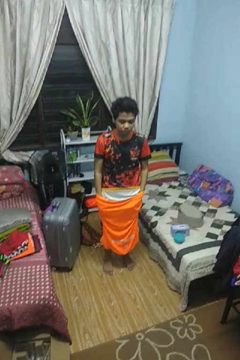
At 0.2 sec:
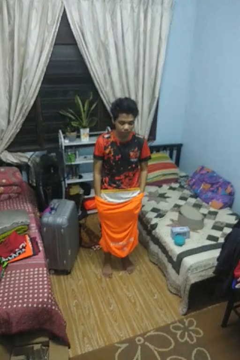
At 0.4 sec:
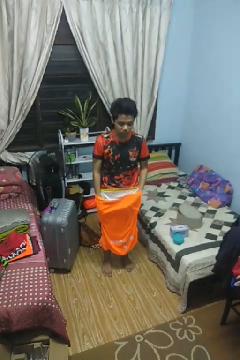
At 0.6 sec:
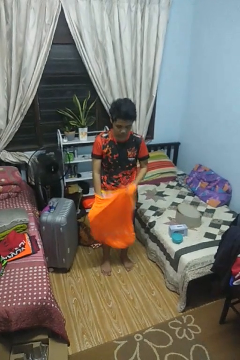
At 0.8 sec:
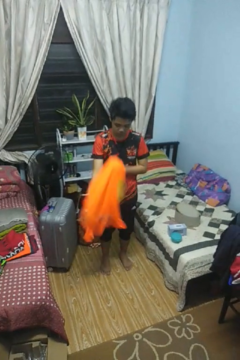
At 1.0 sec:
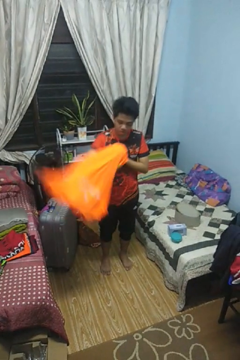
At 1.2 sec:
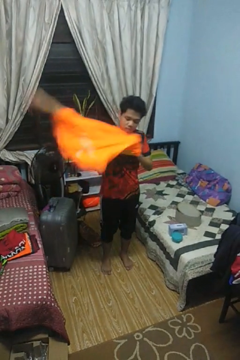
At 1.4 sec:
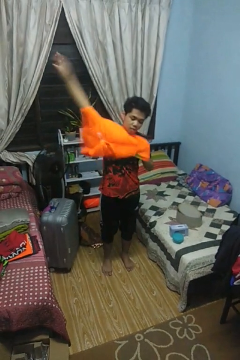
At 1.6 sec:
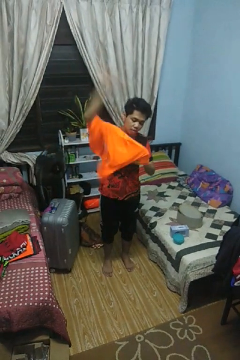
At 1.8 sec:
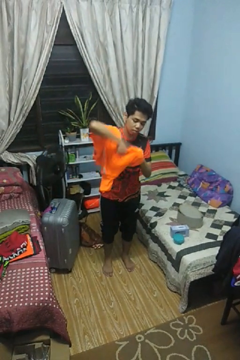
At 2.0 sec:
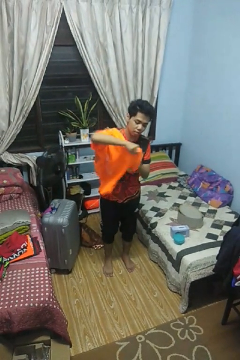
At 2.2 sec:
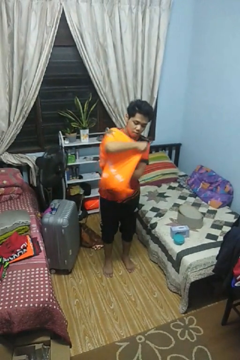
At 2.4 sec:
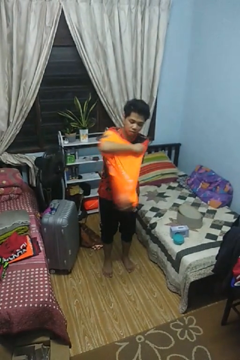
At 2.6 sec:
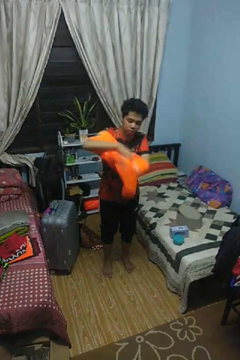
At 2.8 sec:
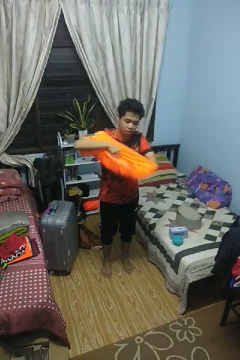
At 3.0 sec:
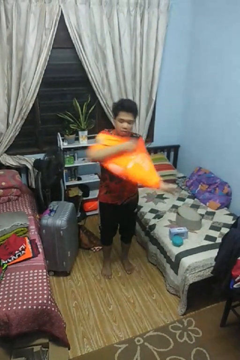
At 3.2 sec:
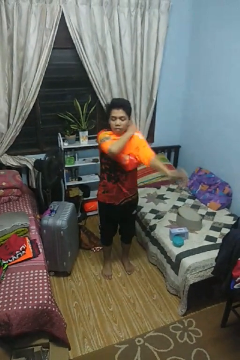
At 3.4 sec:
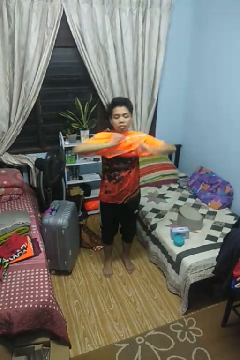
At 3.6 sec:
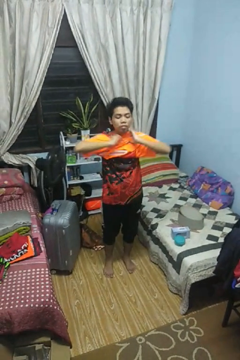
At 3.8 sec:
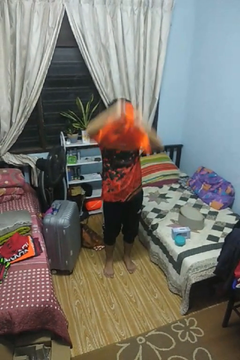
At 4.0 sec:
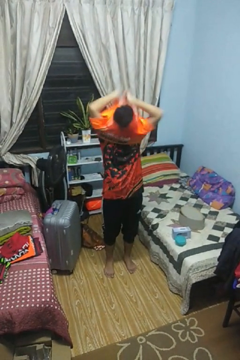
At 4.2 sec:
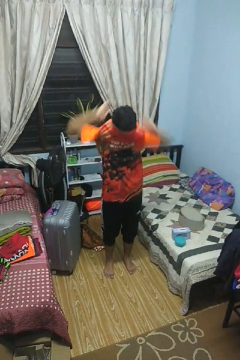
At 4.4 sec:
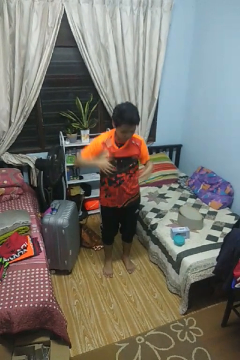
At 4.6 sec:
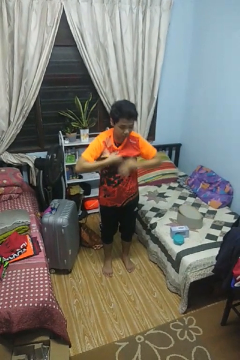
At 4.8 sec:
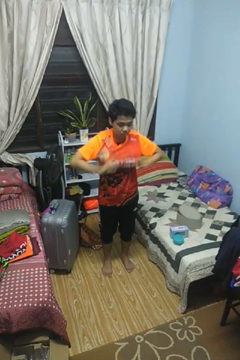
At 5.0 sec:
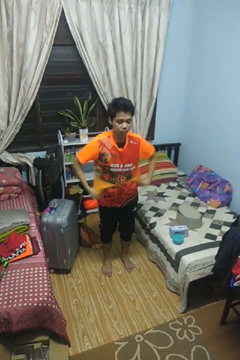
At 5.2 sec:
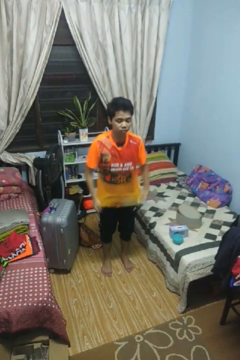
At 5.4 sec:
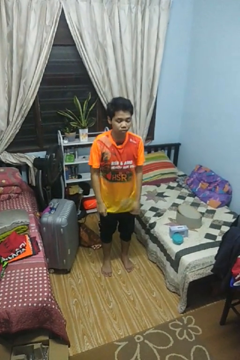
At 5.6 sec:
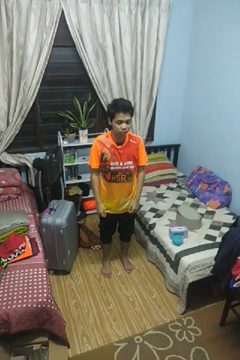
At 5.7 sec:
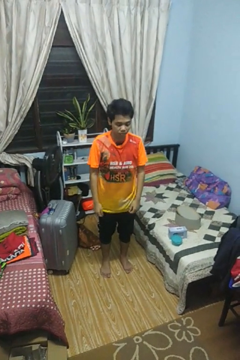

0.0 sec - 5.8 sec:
person puts on shirt

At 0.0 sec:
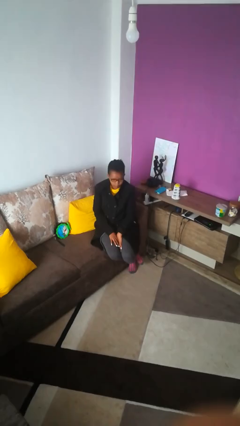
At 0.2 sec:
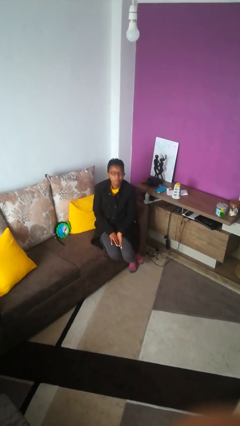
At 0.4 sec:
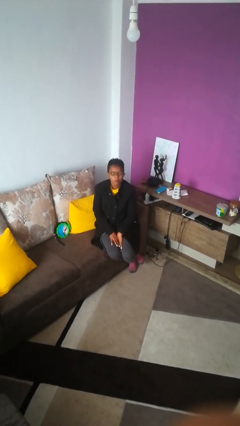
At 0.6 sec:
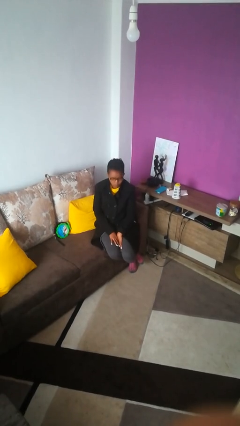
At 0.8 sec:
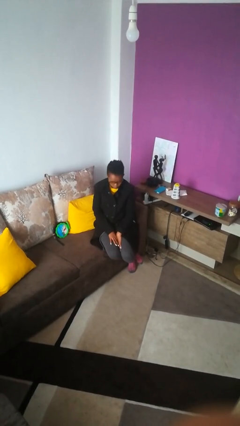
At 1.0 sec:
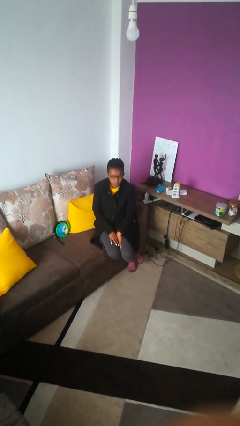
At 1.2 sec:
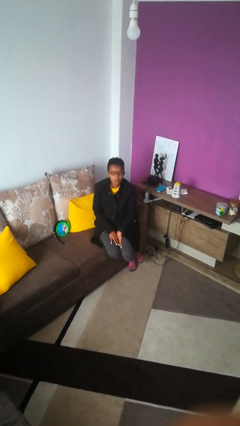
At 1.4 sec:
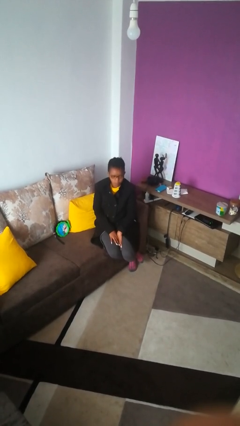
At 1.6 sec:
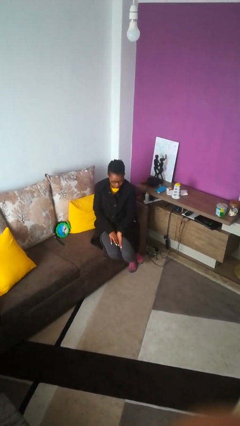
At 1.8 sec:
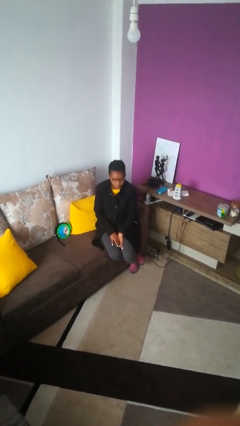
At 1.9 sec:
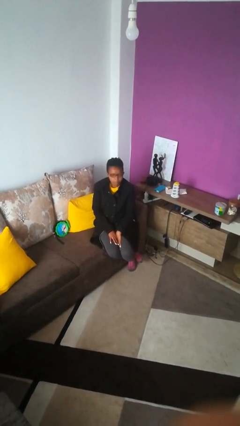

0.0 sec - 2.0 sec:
person nods head

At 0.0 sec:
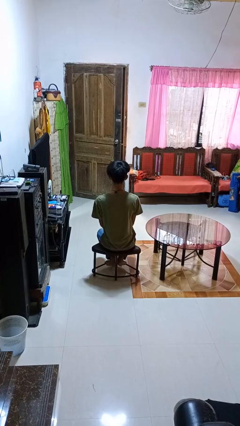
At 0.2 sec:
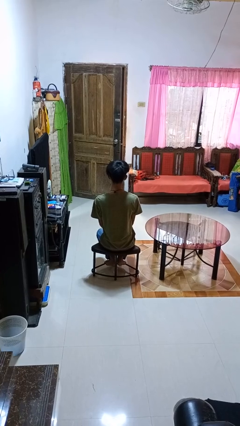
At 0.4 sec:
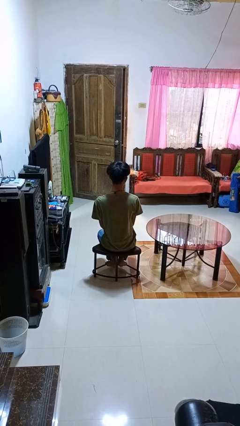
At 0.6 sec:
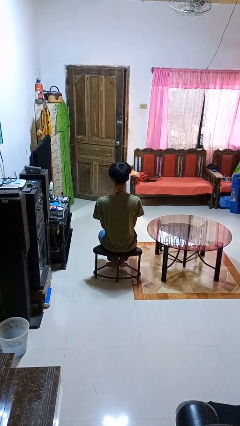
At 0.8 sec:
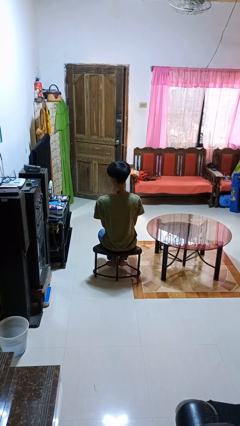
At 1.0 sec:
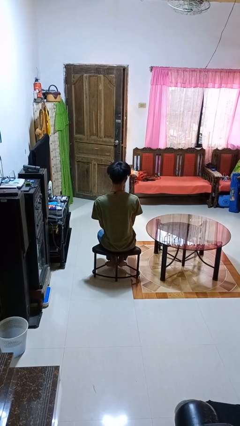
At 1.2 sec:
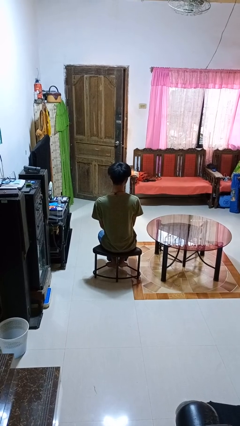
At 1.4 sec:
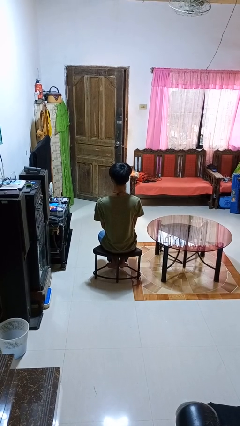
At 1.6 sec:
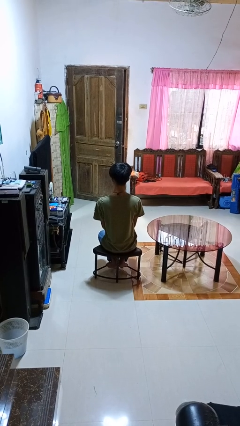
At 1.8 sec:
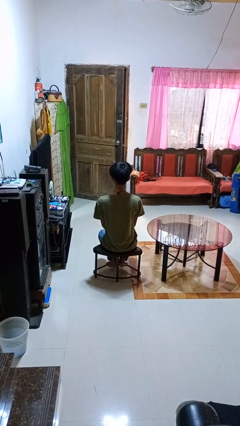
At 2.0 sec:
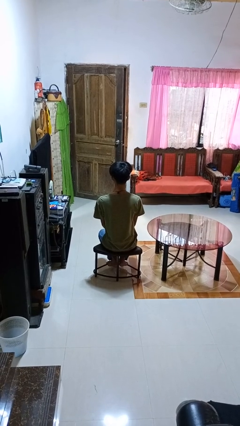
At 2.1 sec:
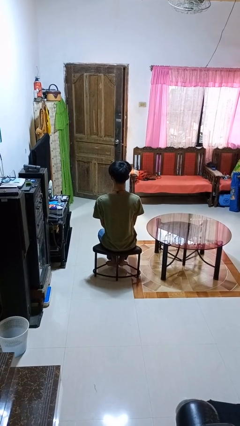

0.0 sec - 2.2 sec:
person shakes head

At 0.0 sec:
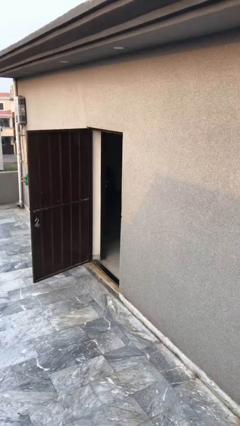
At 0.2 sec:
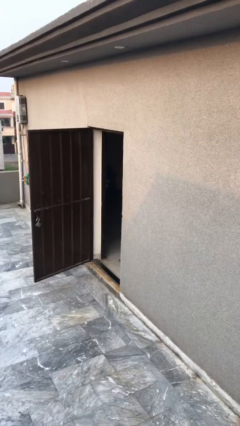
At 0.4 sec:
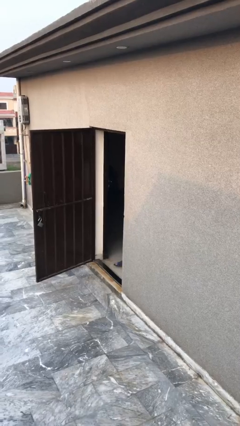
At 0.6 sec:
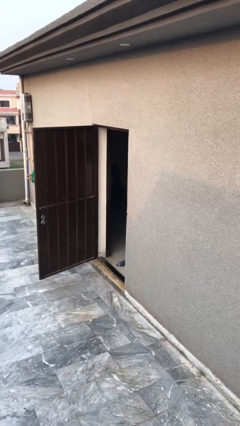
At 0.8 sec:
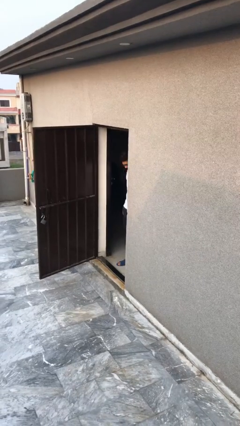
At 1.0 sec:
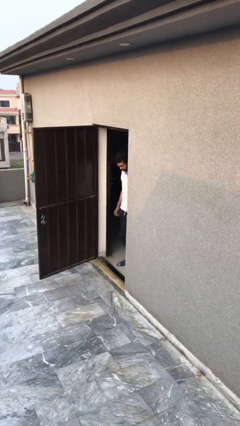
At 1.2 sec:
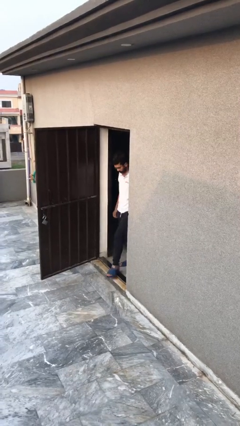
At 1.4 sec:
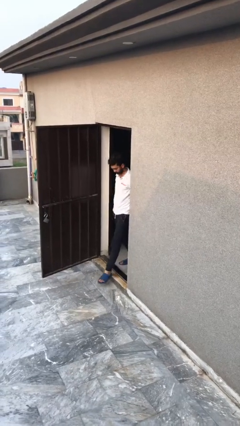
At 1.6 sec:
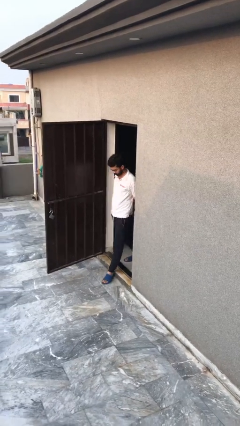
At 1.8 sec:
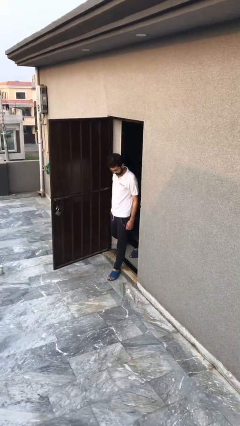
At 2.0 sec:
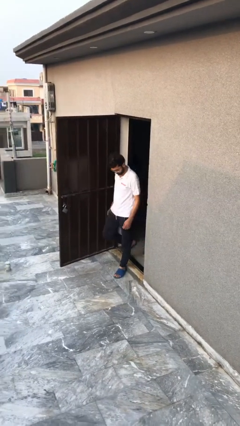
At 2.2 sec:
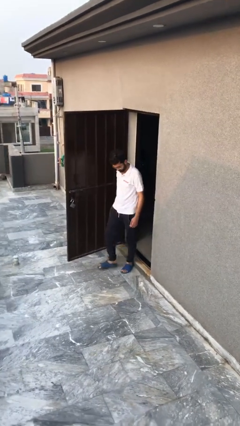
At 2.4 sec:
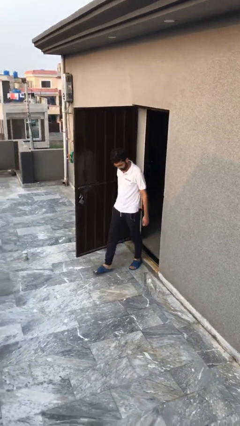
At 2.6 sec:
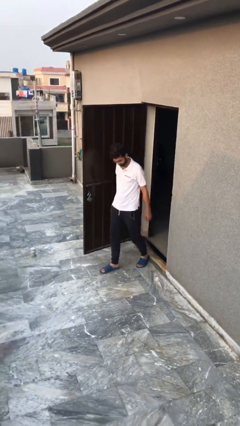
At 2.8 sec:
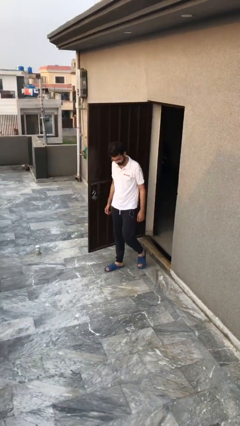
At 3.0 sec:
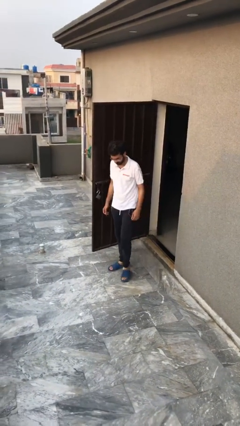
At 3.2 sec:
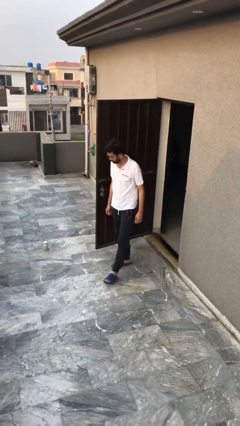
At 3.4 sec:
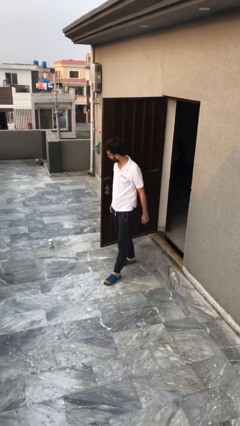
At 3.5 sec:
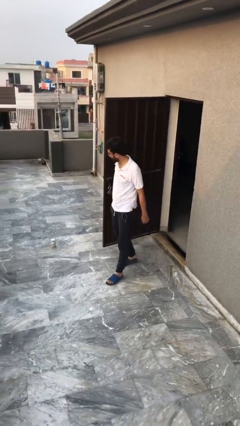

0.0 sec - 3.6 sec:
person enters scene through structure

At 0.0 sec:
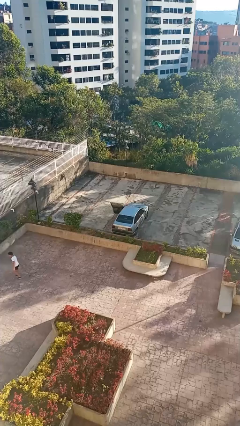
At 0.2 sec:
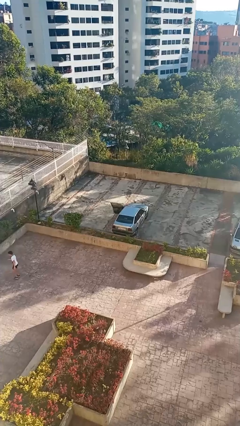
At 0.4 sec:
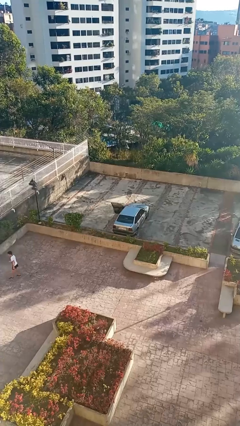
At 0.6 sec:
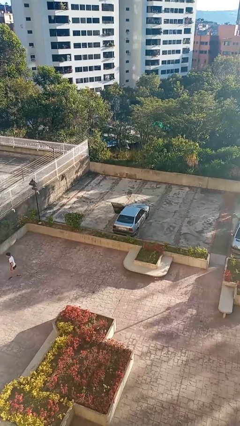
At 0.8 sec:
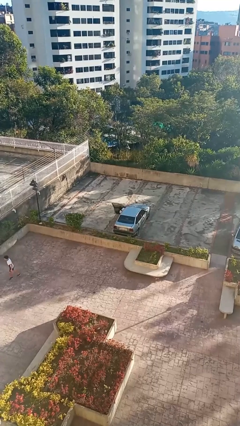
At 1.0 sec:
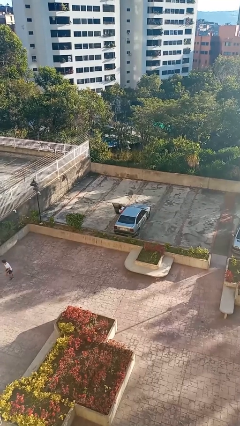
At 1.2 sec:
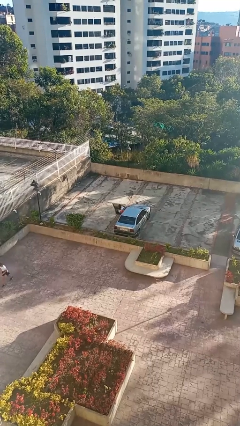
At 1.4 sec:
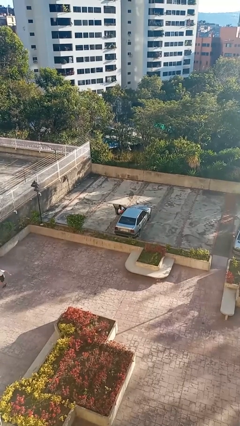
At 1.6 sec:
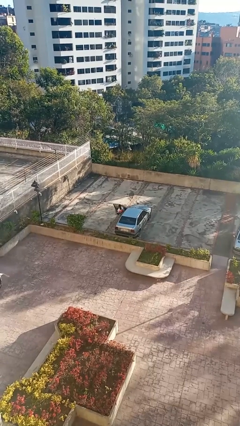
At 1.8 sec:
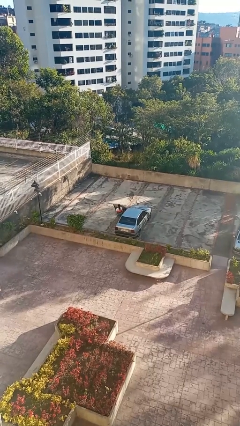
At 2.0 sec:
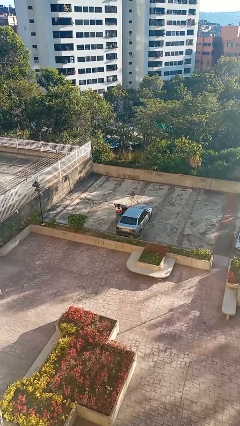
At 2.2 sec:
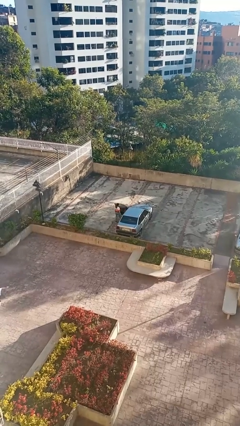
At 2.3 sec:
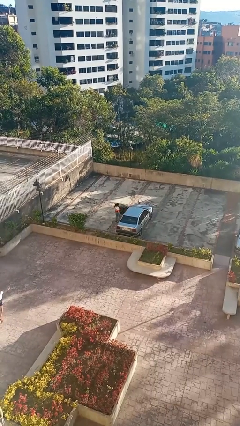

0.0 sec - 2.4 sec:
person exits car

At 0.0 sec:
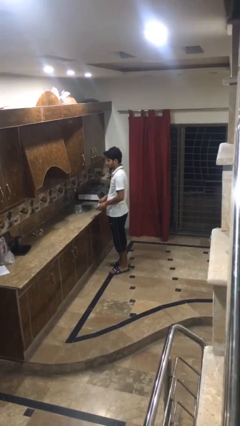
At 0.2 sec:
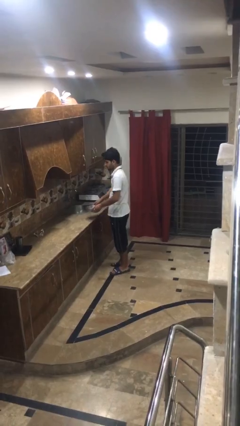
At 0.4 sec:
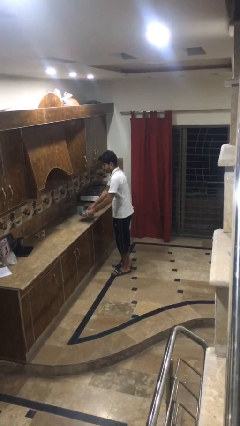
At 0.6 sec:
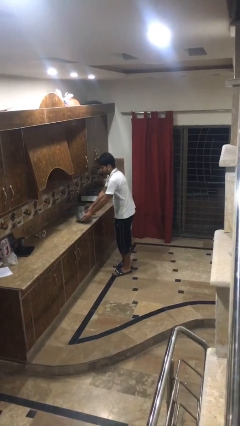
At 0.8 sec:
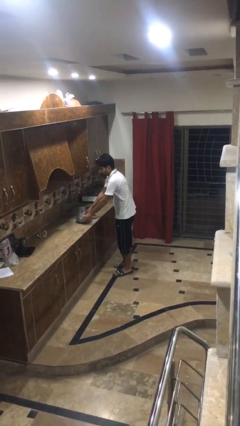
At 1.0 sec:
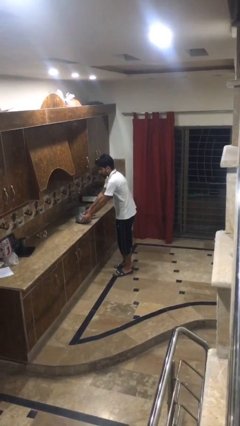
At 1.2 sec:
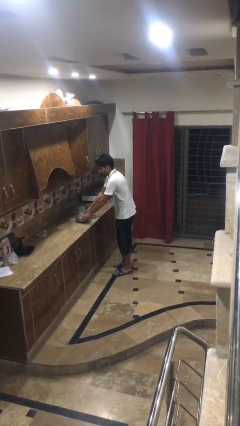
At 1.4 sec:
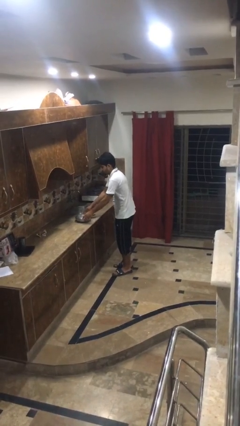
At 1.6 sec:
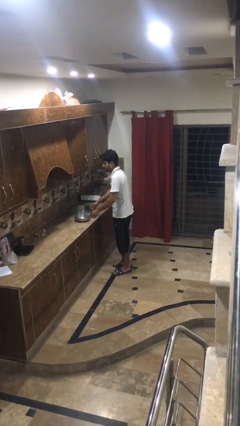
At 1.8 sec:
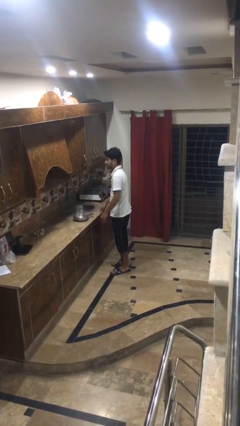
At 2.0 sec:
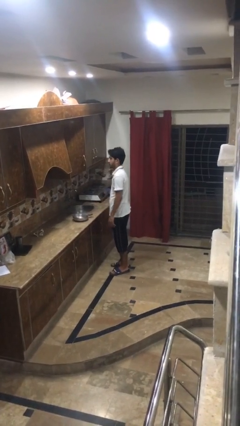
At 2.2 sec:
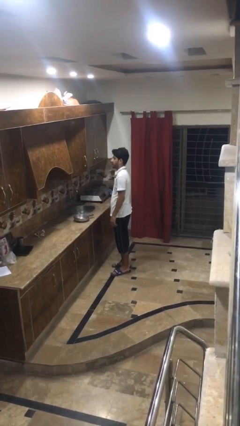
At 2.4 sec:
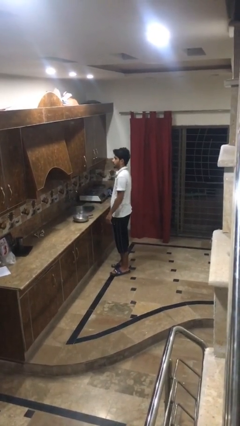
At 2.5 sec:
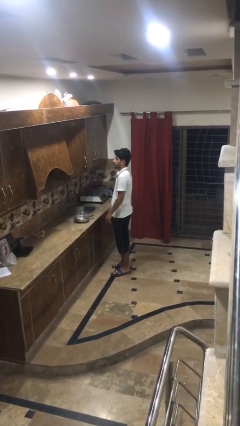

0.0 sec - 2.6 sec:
person puts down object on countertop
